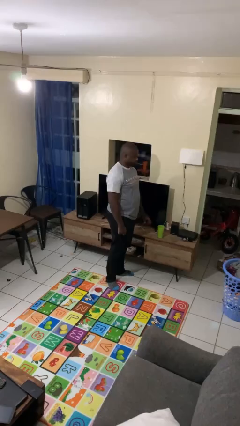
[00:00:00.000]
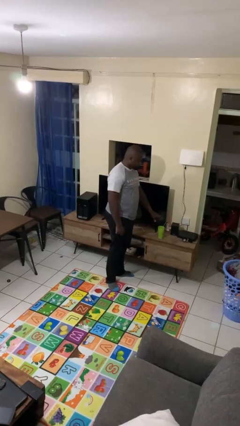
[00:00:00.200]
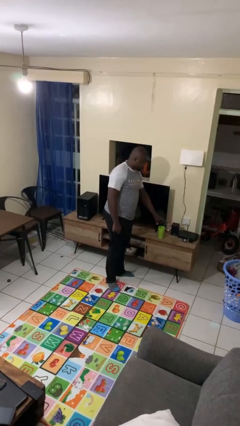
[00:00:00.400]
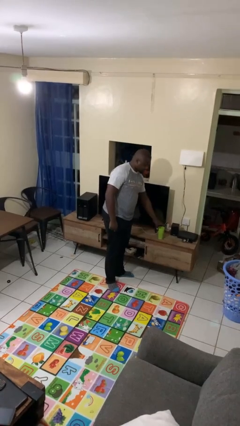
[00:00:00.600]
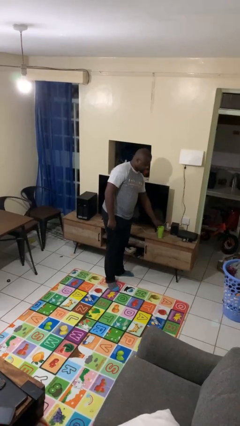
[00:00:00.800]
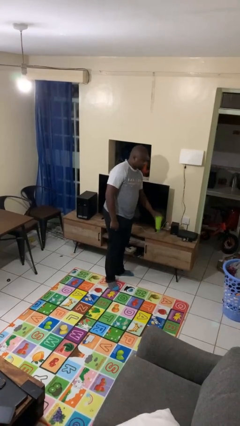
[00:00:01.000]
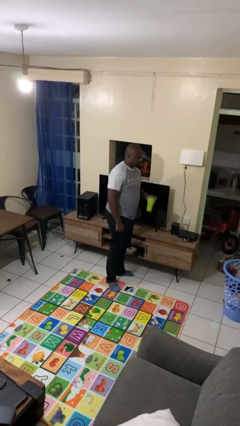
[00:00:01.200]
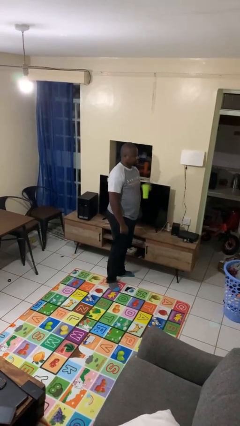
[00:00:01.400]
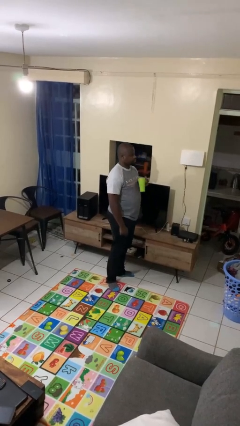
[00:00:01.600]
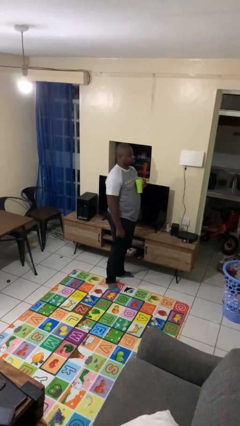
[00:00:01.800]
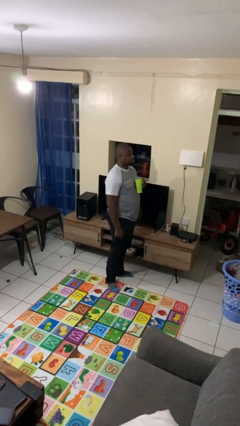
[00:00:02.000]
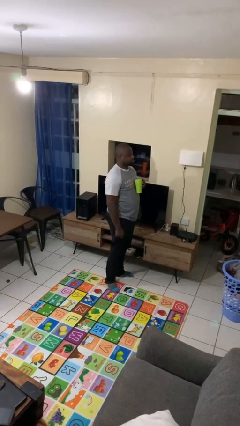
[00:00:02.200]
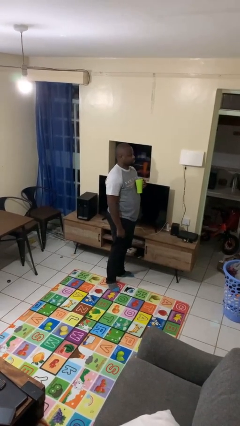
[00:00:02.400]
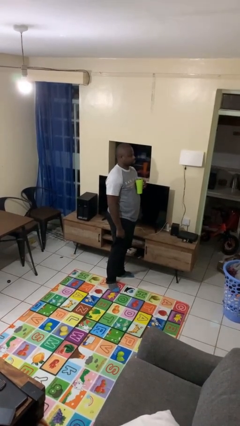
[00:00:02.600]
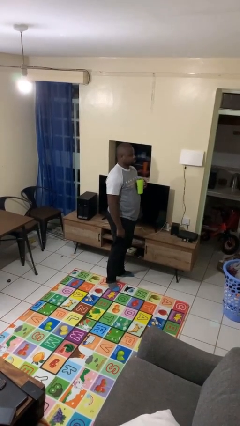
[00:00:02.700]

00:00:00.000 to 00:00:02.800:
person picks up object from countertop

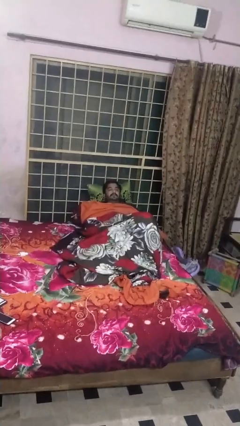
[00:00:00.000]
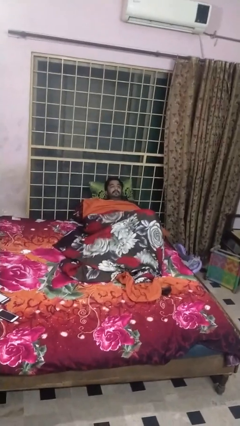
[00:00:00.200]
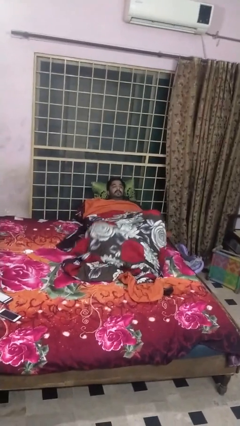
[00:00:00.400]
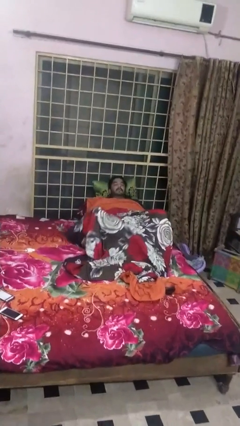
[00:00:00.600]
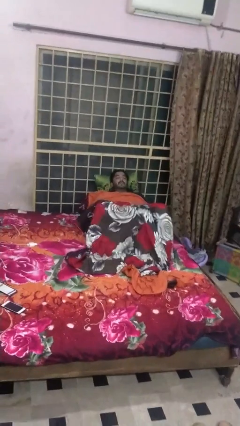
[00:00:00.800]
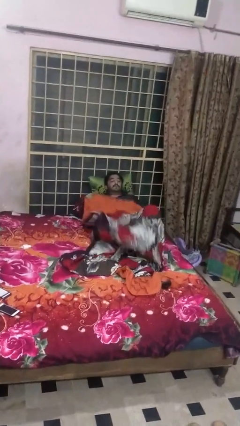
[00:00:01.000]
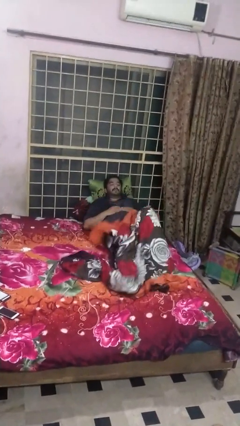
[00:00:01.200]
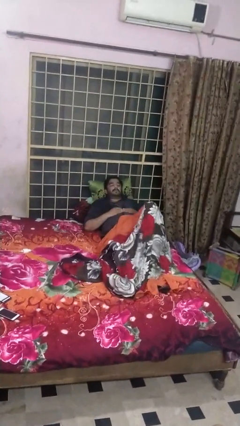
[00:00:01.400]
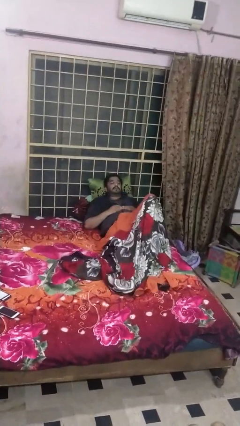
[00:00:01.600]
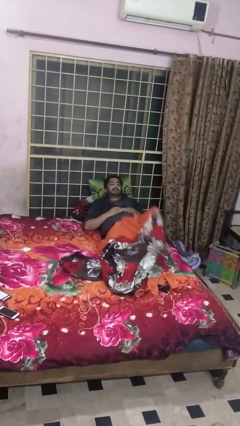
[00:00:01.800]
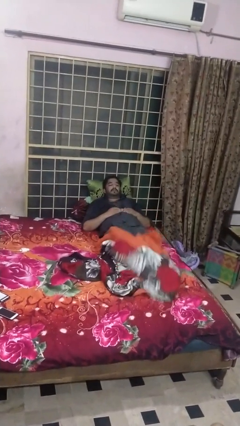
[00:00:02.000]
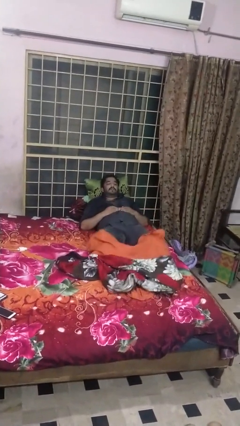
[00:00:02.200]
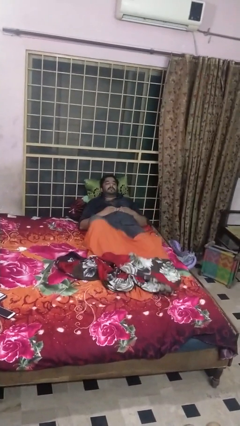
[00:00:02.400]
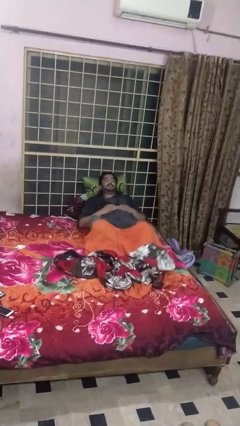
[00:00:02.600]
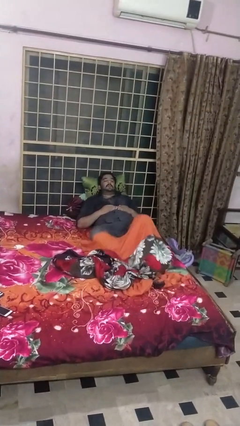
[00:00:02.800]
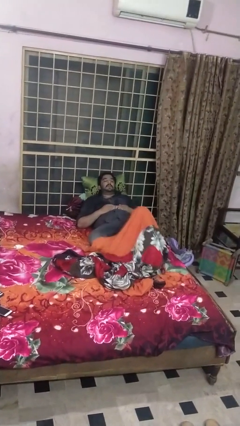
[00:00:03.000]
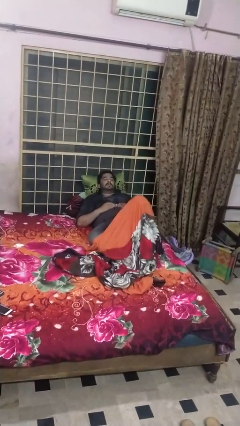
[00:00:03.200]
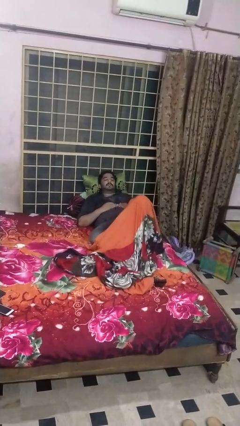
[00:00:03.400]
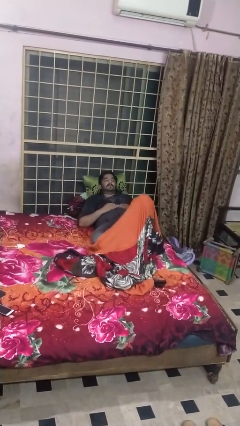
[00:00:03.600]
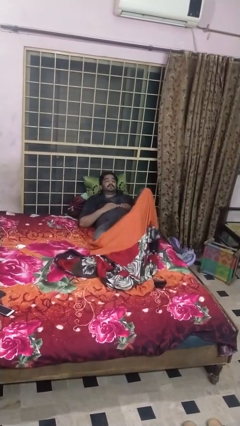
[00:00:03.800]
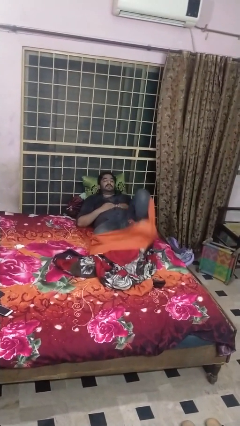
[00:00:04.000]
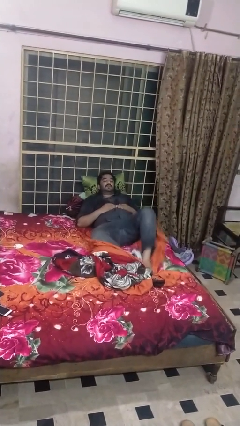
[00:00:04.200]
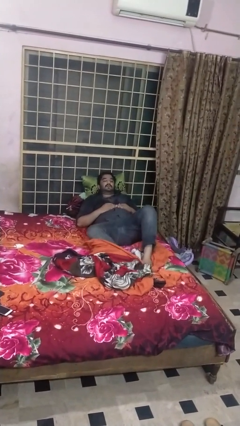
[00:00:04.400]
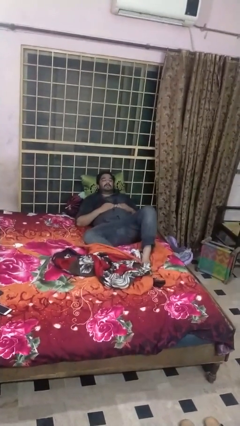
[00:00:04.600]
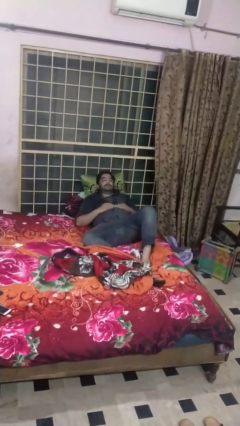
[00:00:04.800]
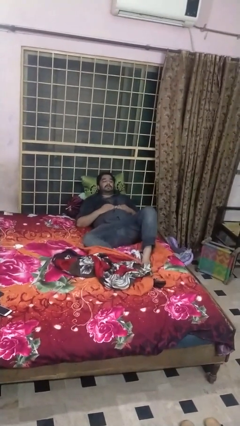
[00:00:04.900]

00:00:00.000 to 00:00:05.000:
person uncovers with bedsheets

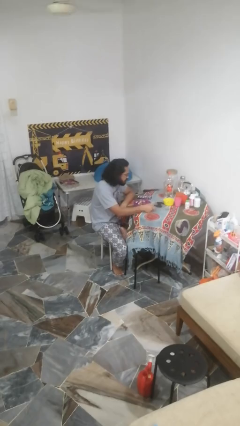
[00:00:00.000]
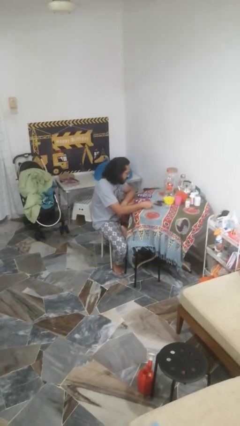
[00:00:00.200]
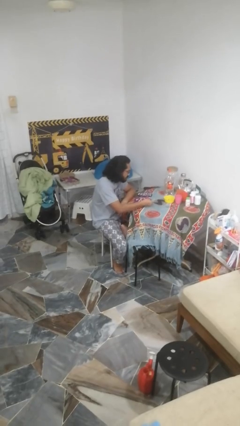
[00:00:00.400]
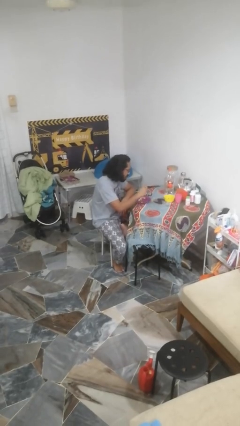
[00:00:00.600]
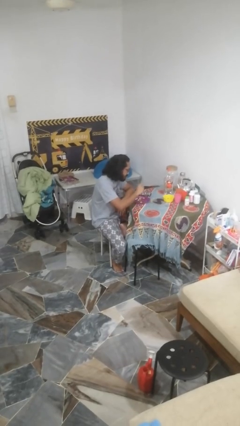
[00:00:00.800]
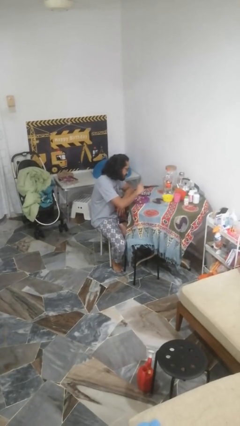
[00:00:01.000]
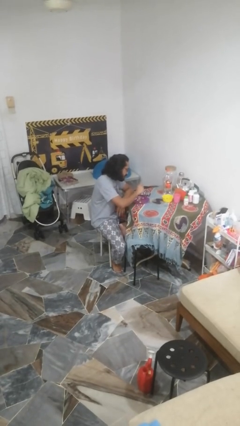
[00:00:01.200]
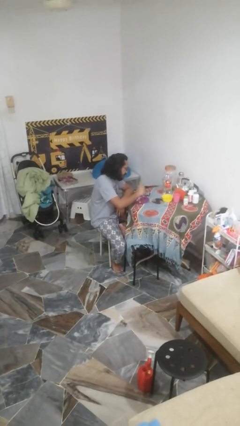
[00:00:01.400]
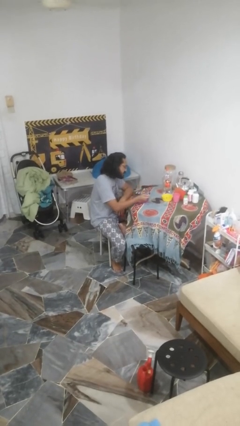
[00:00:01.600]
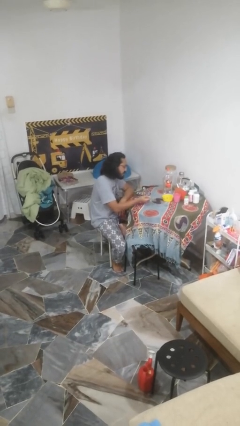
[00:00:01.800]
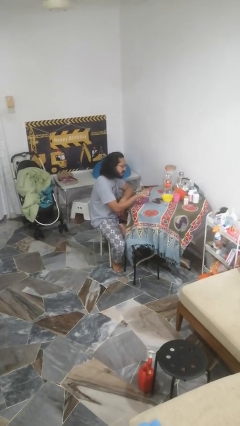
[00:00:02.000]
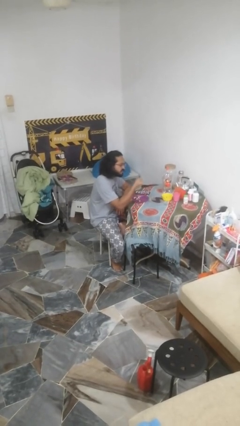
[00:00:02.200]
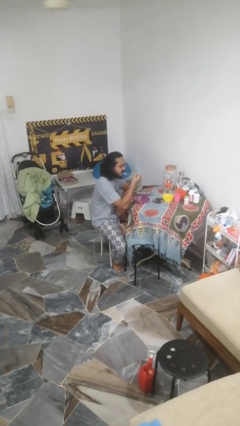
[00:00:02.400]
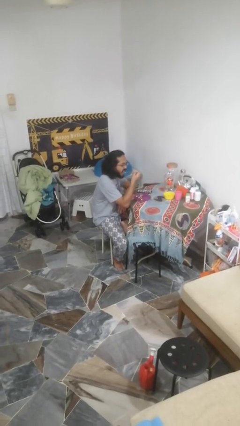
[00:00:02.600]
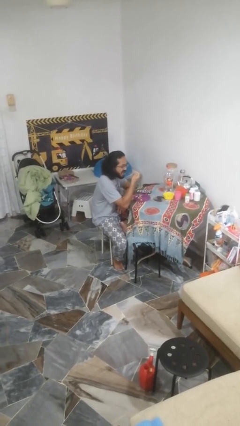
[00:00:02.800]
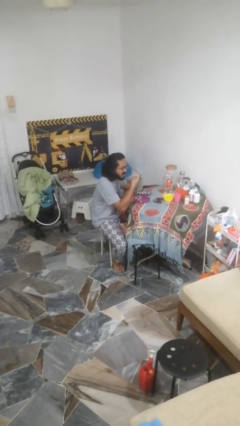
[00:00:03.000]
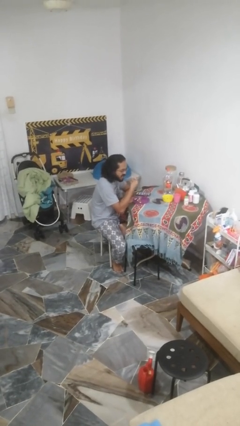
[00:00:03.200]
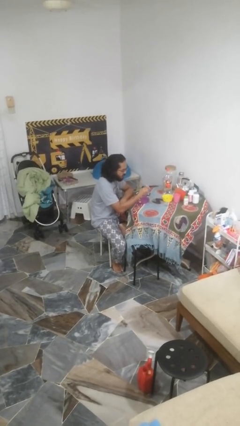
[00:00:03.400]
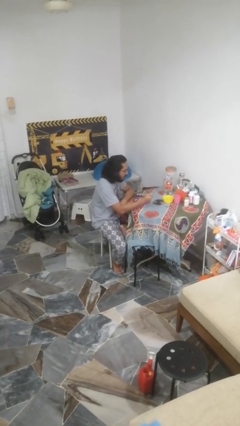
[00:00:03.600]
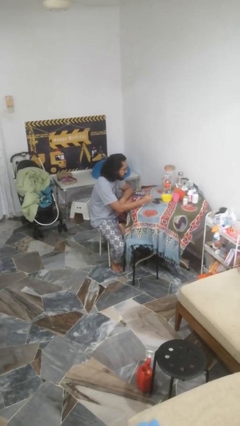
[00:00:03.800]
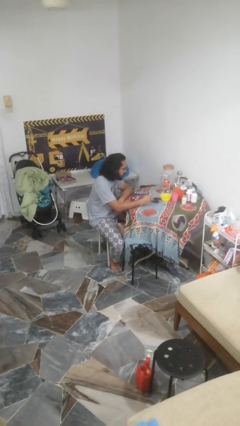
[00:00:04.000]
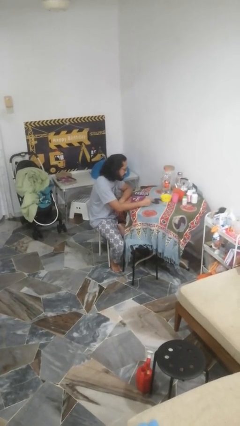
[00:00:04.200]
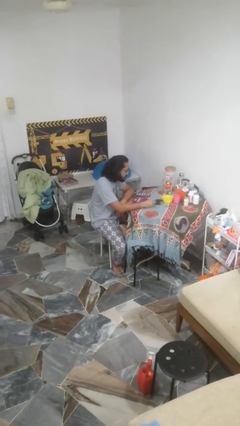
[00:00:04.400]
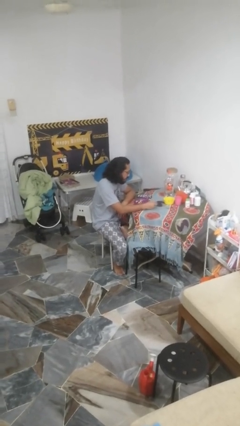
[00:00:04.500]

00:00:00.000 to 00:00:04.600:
person eats with utensil

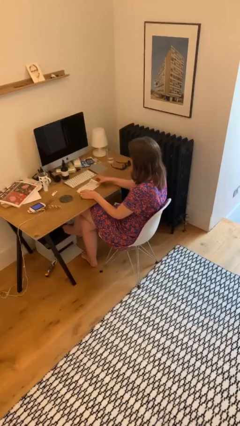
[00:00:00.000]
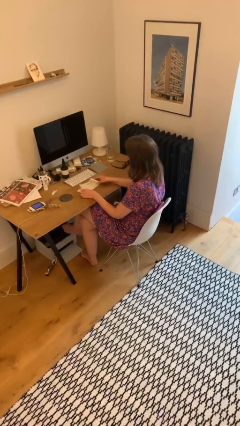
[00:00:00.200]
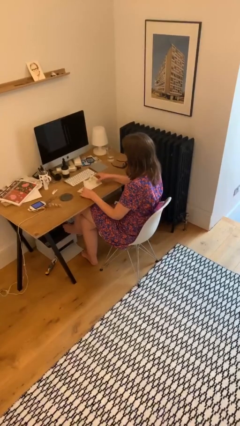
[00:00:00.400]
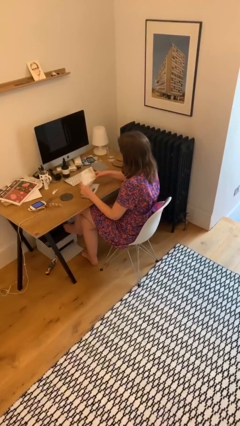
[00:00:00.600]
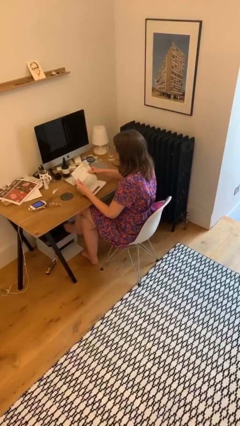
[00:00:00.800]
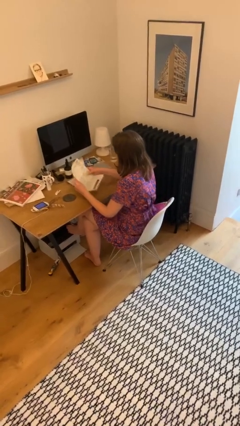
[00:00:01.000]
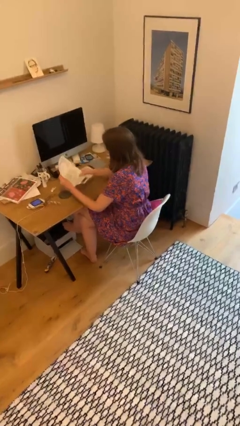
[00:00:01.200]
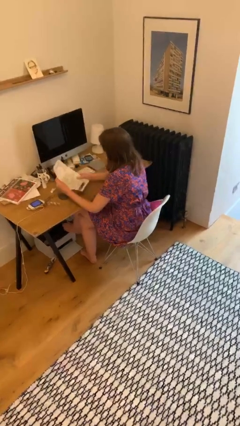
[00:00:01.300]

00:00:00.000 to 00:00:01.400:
person picks up object from table

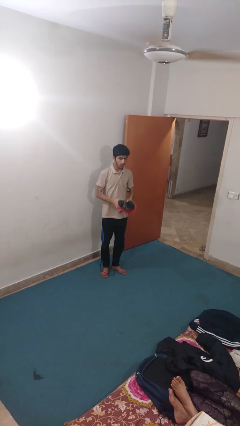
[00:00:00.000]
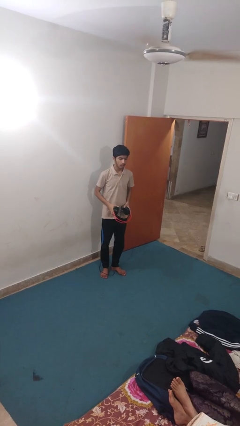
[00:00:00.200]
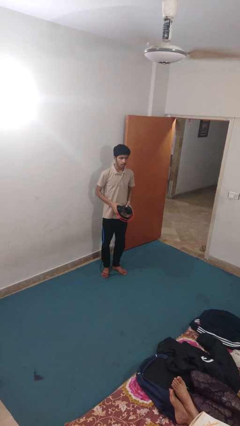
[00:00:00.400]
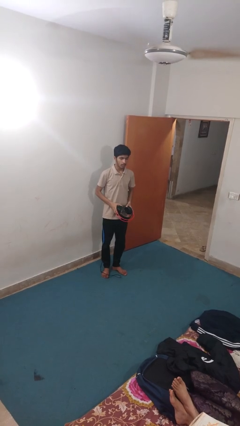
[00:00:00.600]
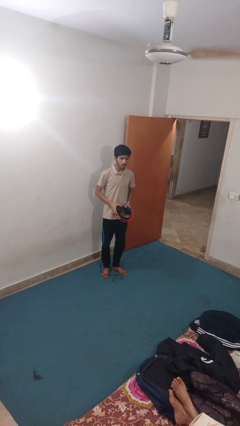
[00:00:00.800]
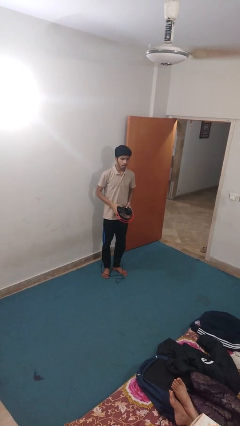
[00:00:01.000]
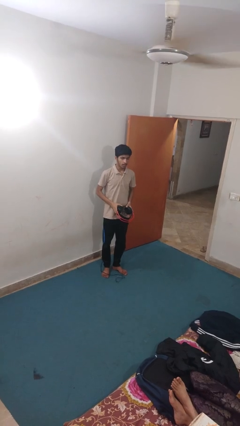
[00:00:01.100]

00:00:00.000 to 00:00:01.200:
person takes off headphones

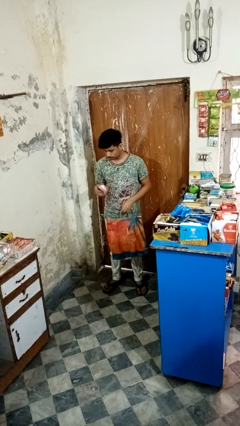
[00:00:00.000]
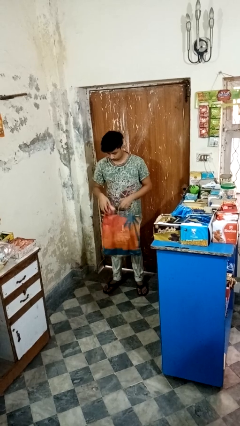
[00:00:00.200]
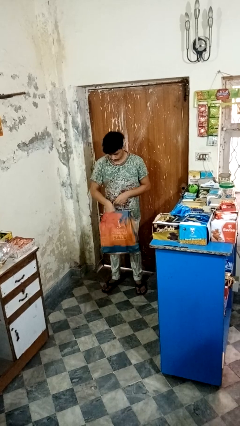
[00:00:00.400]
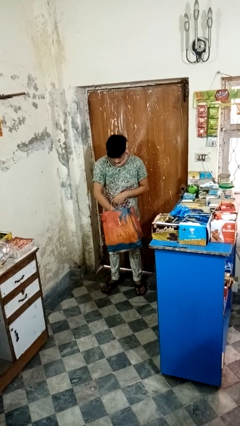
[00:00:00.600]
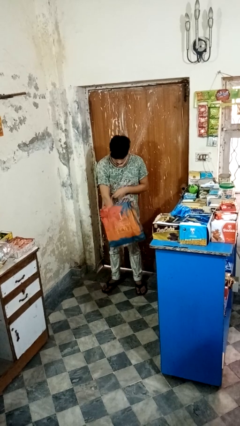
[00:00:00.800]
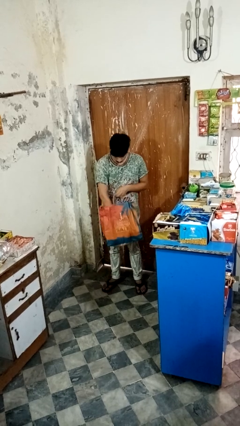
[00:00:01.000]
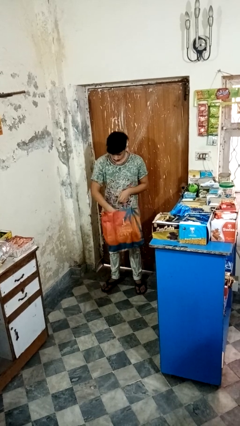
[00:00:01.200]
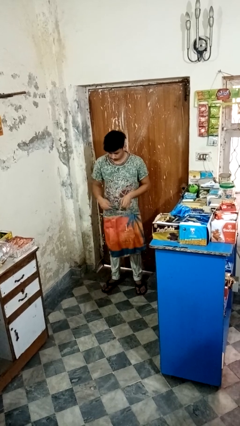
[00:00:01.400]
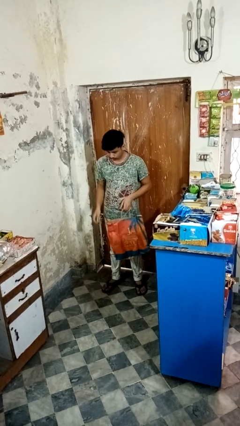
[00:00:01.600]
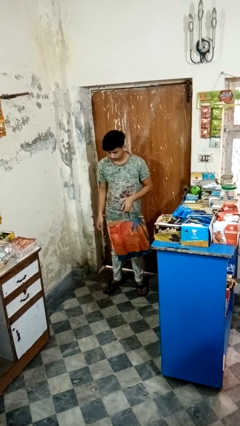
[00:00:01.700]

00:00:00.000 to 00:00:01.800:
person puts object into bag

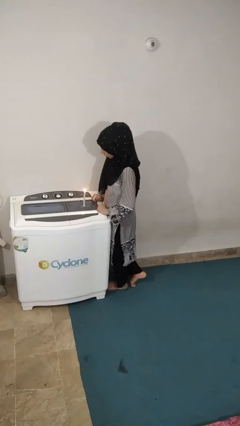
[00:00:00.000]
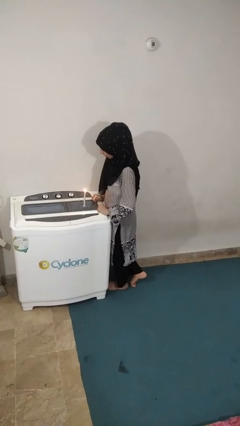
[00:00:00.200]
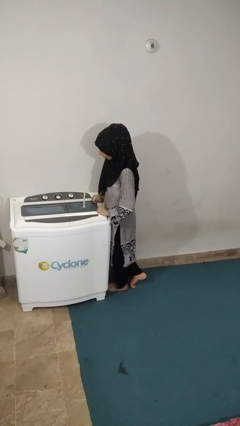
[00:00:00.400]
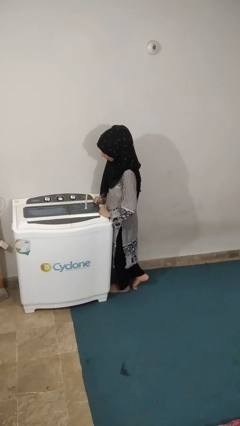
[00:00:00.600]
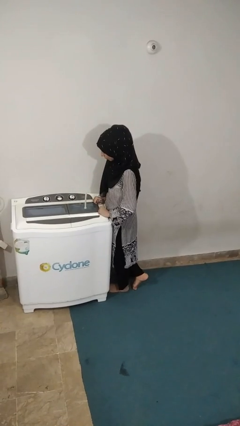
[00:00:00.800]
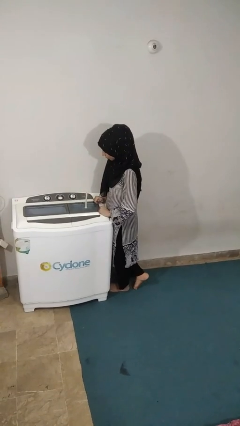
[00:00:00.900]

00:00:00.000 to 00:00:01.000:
person extinguishes candle
